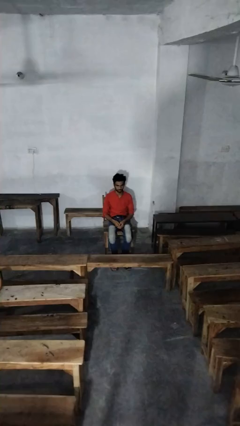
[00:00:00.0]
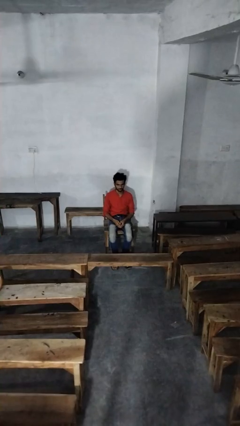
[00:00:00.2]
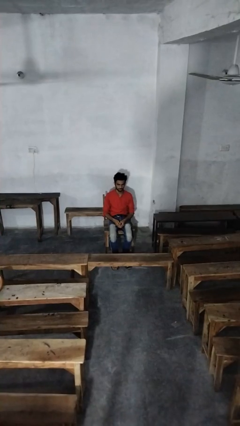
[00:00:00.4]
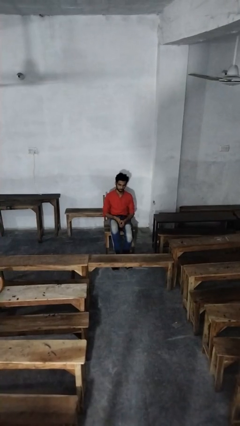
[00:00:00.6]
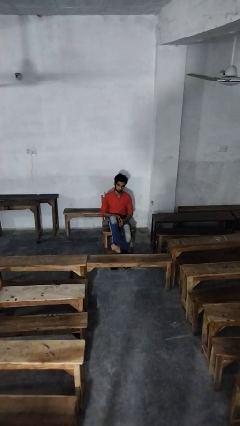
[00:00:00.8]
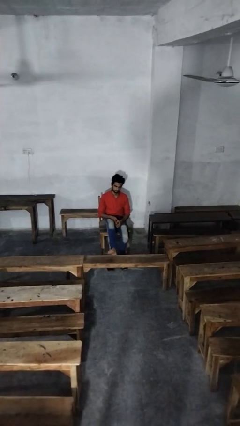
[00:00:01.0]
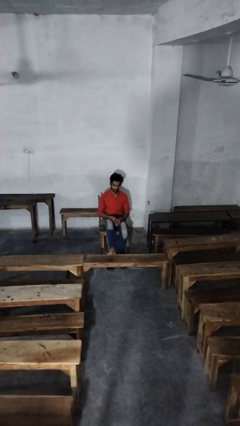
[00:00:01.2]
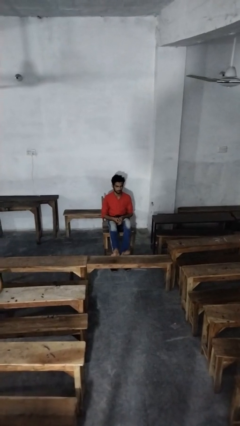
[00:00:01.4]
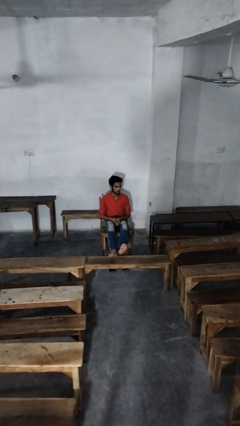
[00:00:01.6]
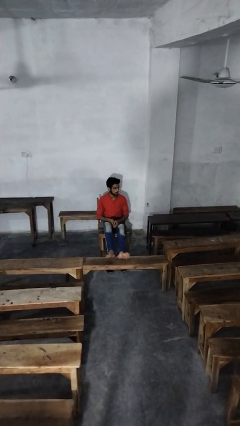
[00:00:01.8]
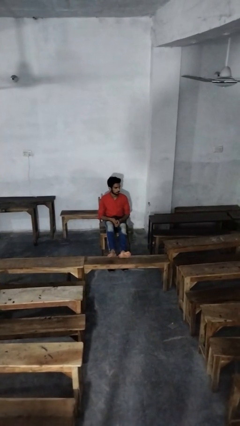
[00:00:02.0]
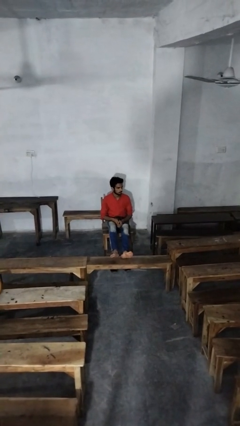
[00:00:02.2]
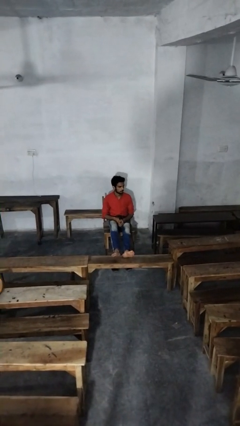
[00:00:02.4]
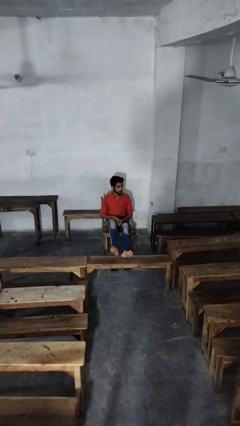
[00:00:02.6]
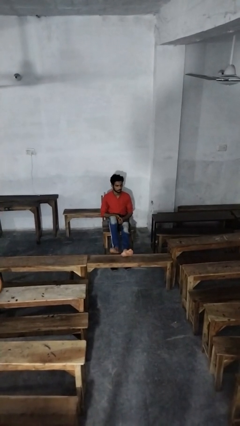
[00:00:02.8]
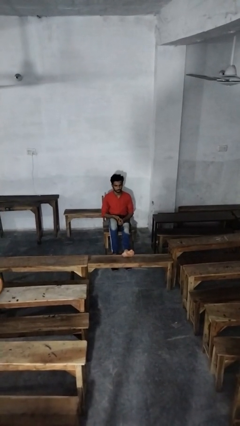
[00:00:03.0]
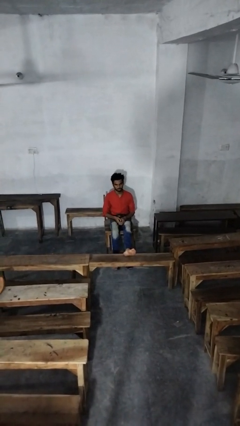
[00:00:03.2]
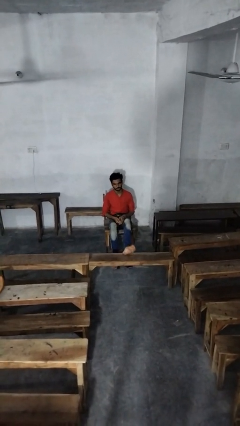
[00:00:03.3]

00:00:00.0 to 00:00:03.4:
person puts feet up

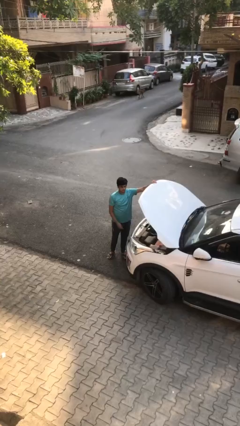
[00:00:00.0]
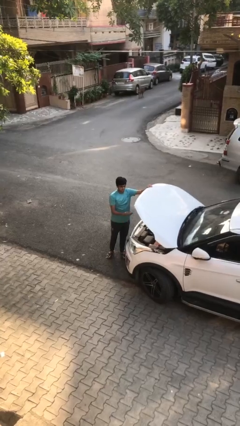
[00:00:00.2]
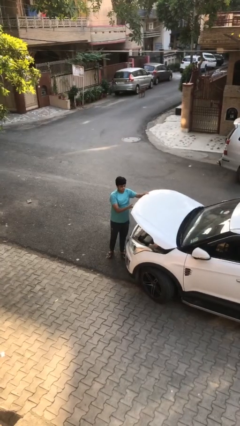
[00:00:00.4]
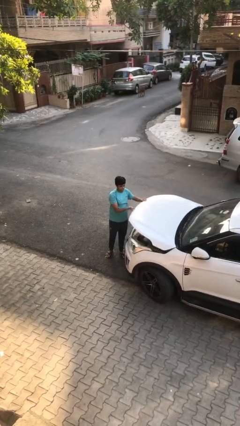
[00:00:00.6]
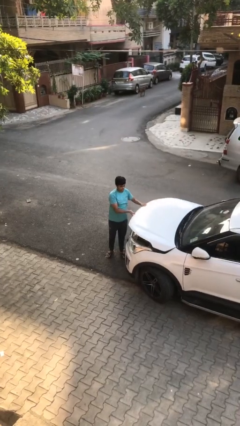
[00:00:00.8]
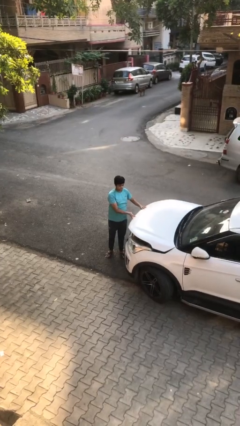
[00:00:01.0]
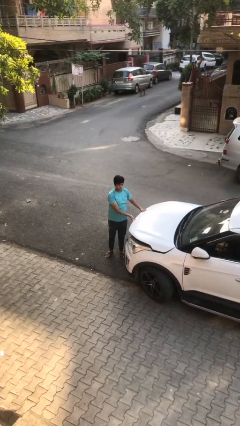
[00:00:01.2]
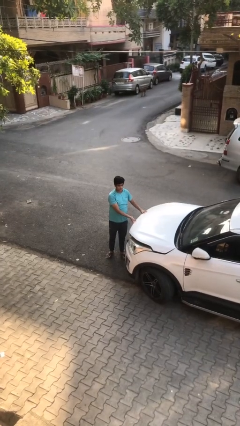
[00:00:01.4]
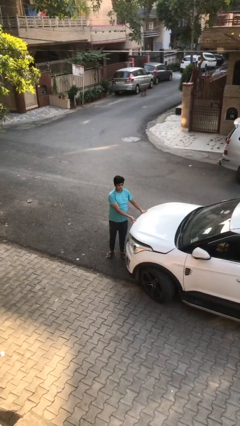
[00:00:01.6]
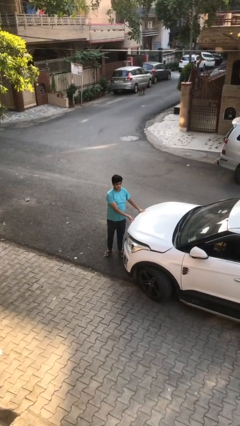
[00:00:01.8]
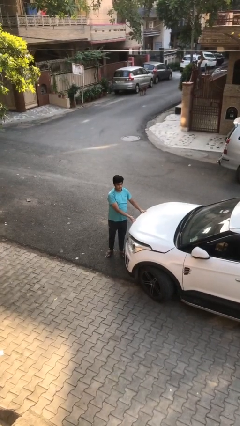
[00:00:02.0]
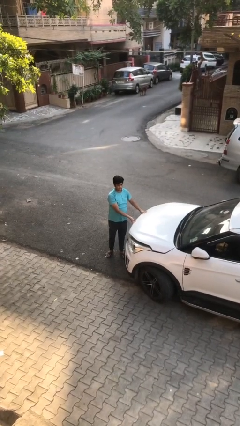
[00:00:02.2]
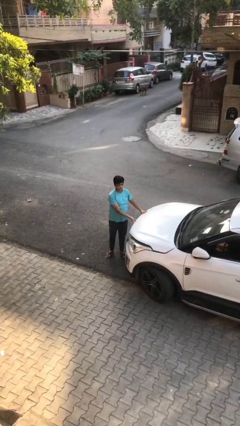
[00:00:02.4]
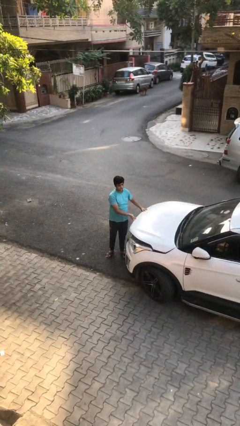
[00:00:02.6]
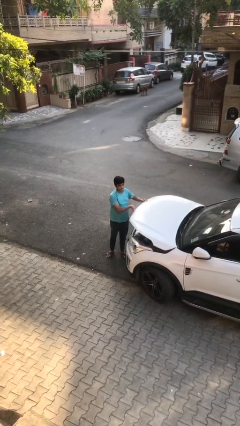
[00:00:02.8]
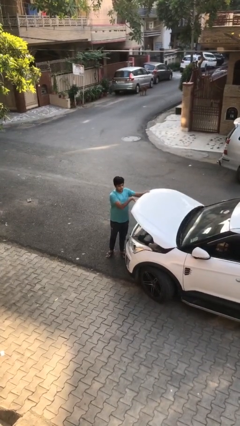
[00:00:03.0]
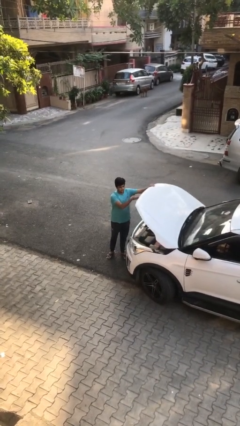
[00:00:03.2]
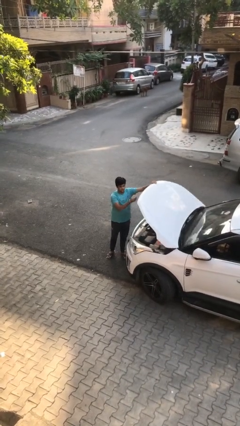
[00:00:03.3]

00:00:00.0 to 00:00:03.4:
person closes car hood

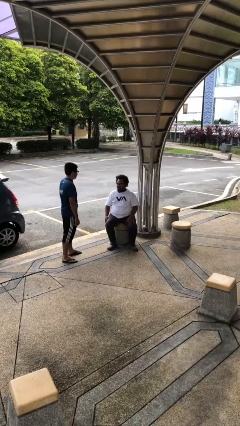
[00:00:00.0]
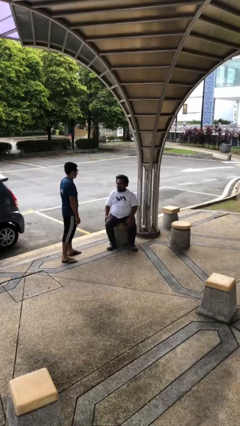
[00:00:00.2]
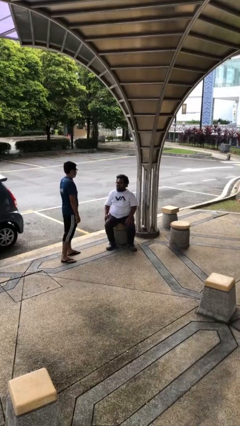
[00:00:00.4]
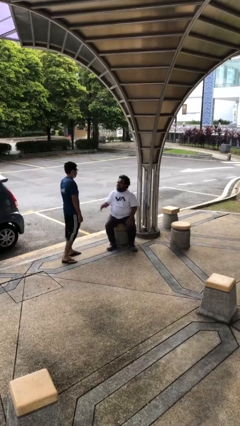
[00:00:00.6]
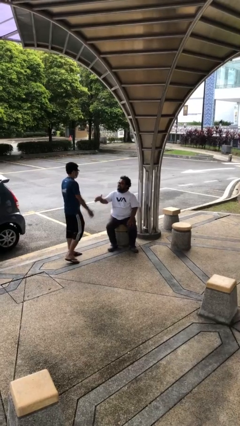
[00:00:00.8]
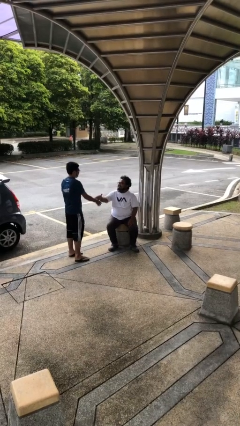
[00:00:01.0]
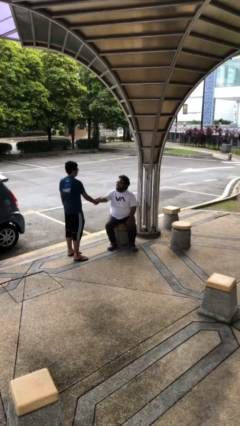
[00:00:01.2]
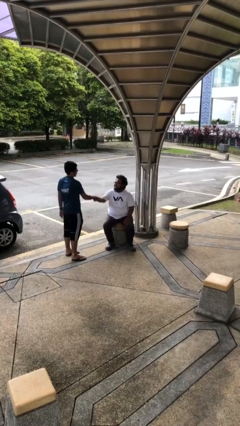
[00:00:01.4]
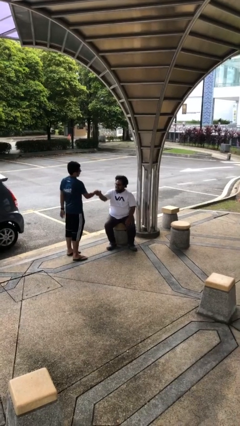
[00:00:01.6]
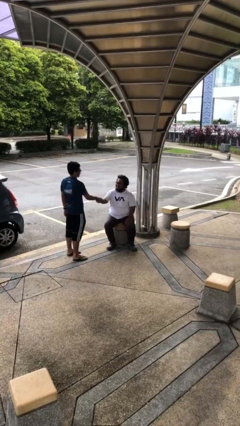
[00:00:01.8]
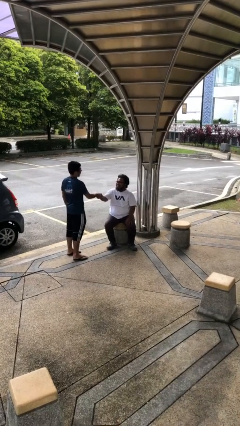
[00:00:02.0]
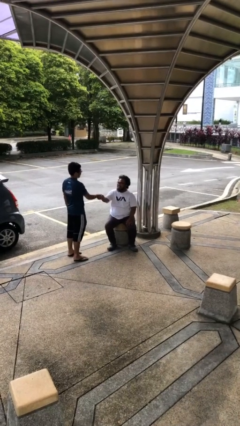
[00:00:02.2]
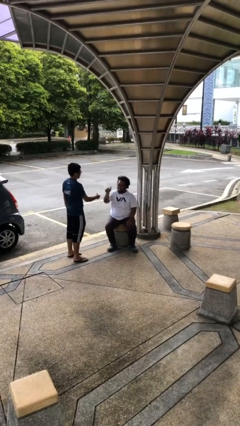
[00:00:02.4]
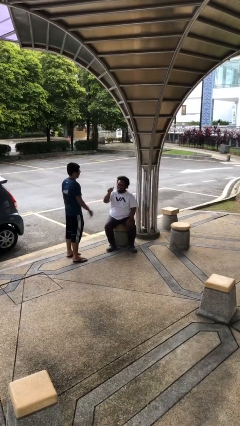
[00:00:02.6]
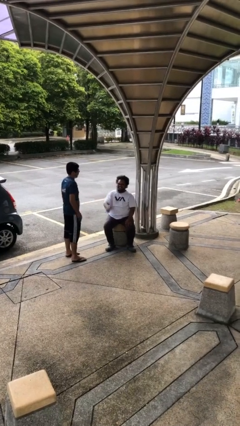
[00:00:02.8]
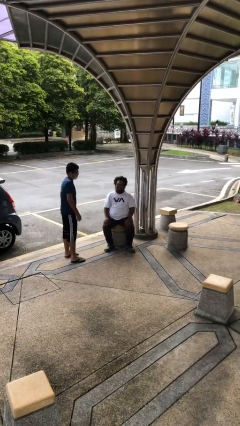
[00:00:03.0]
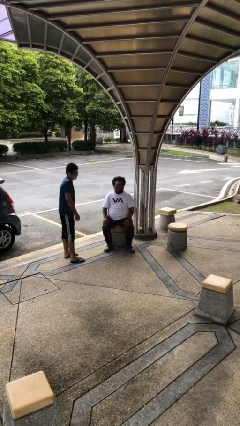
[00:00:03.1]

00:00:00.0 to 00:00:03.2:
person shakes hand

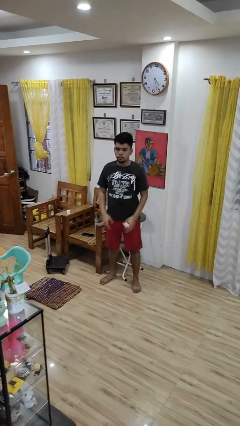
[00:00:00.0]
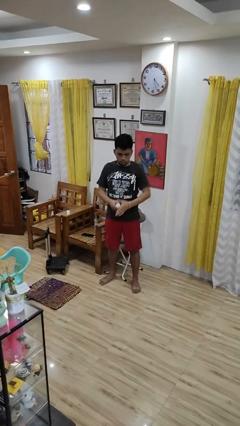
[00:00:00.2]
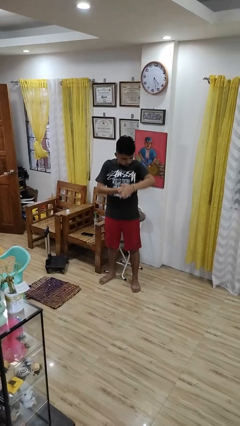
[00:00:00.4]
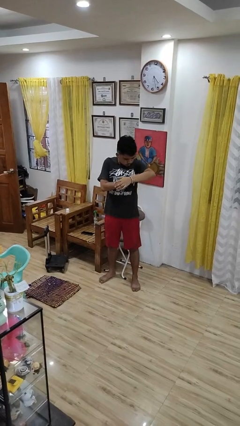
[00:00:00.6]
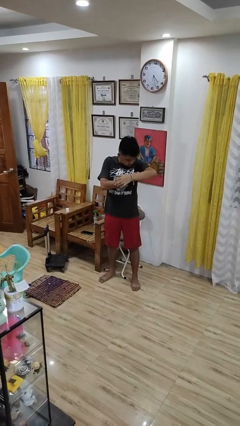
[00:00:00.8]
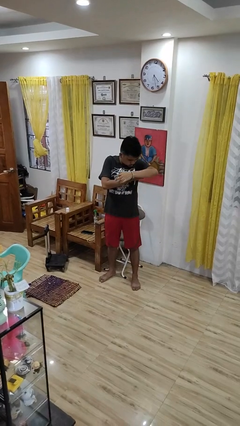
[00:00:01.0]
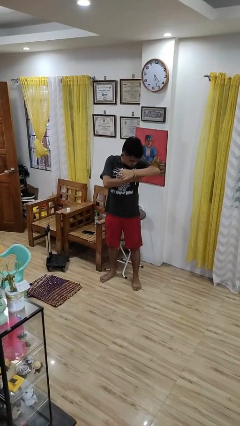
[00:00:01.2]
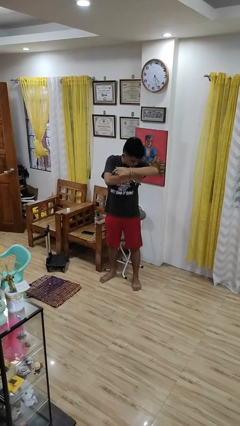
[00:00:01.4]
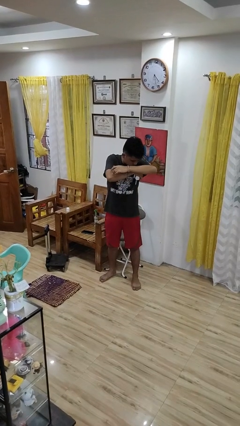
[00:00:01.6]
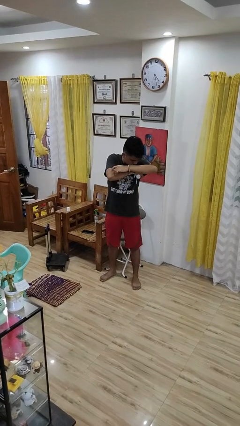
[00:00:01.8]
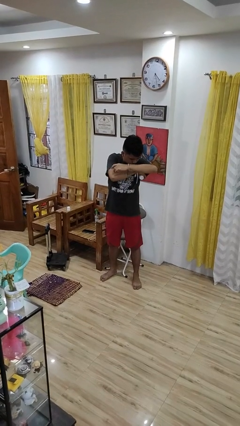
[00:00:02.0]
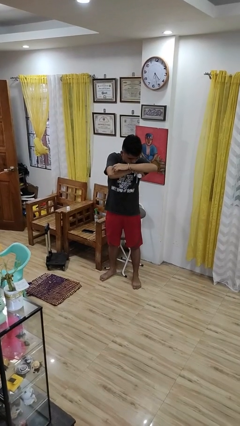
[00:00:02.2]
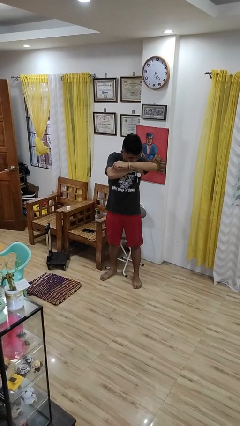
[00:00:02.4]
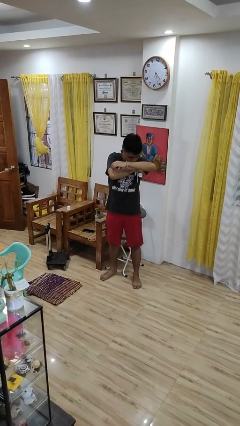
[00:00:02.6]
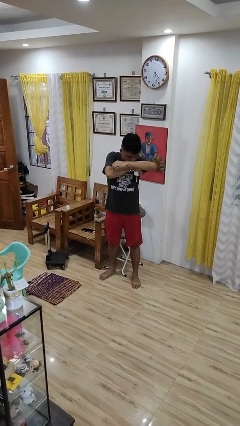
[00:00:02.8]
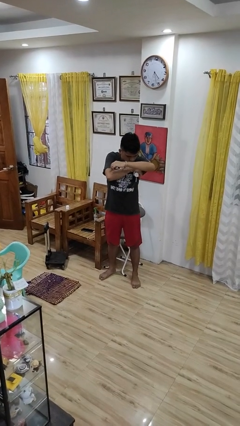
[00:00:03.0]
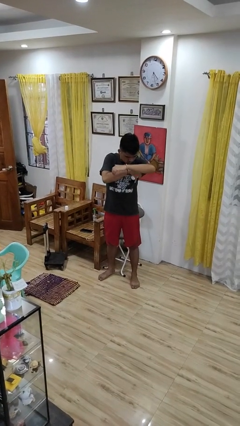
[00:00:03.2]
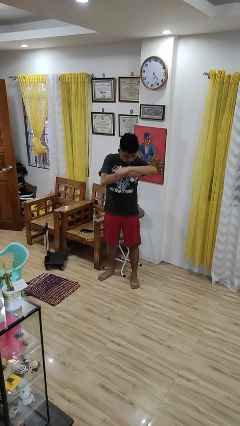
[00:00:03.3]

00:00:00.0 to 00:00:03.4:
person applies deodorant

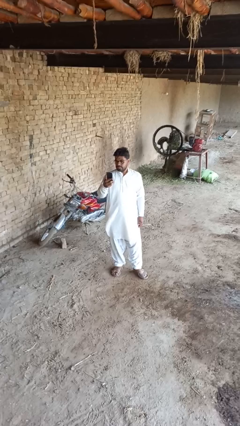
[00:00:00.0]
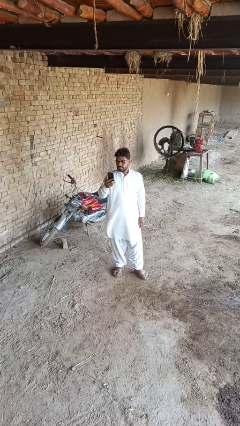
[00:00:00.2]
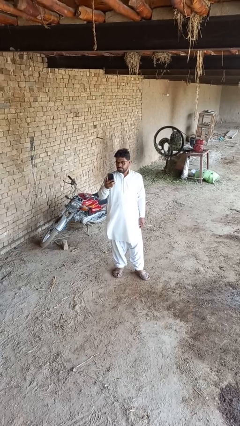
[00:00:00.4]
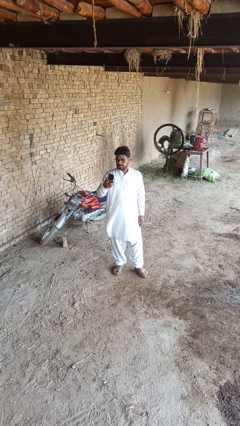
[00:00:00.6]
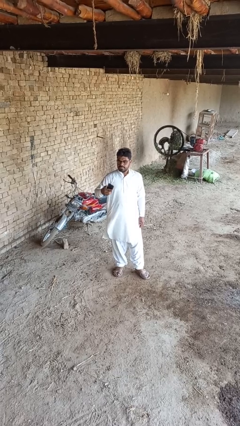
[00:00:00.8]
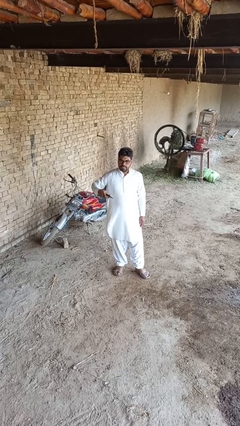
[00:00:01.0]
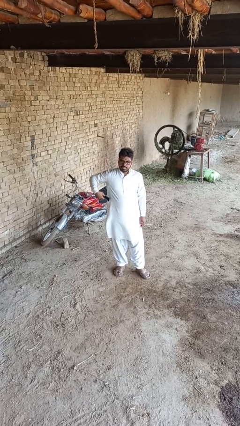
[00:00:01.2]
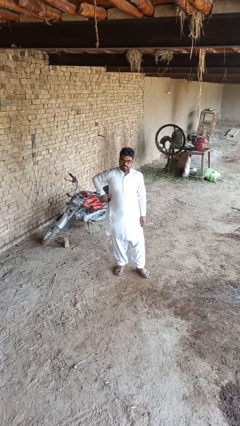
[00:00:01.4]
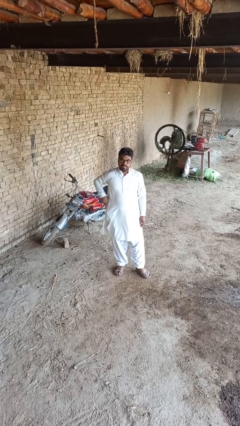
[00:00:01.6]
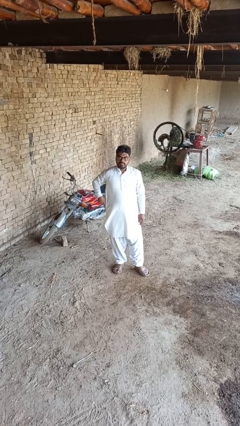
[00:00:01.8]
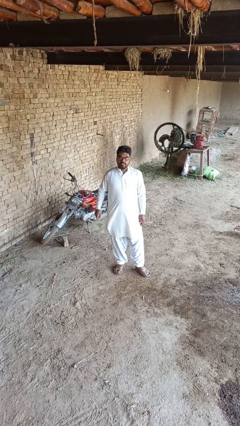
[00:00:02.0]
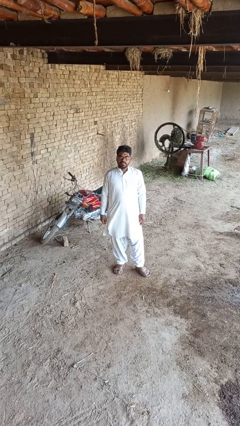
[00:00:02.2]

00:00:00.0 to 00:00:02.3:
person puts phone into pocket

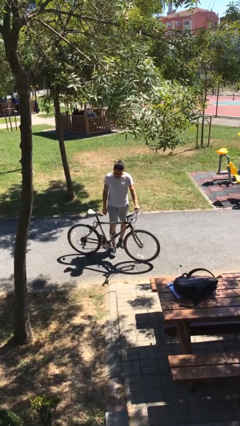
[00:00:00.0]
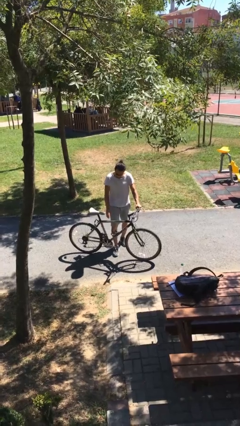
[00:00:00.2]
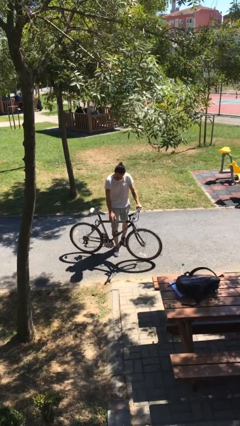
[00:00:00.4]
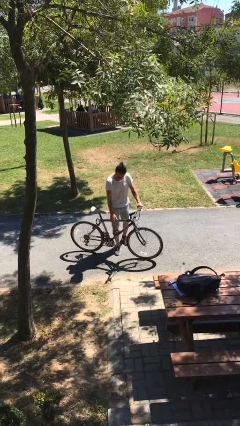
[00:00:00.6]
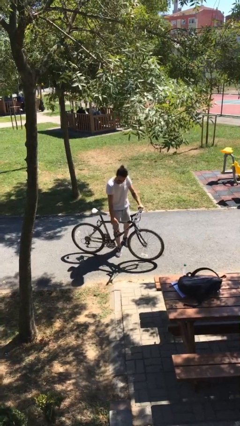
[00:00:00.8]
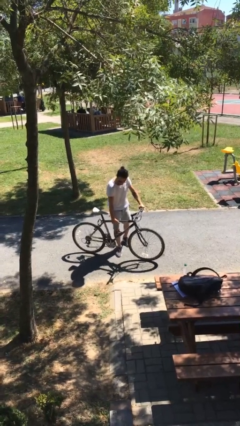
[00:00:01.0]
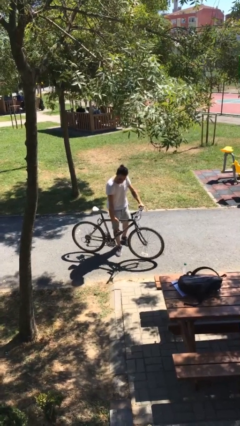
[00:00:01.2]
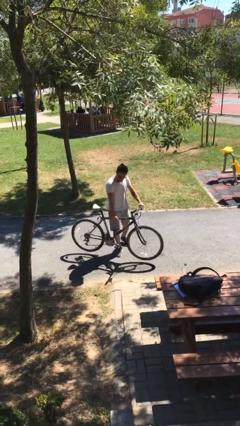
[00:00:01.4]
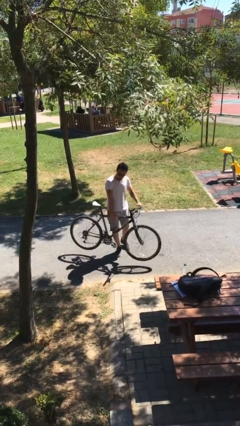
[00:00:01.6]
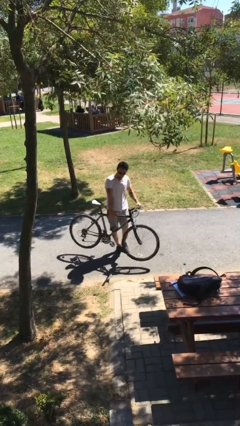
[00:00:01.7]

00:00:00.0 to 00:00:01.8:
person picks up object from floor
